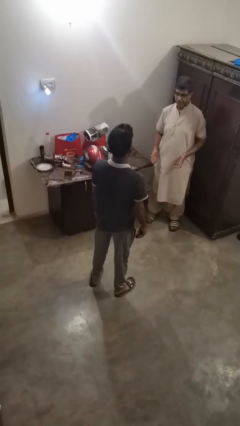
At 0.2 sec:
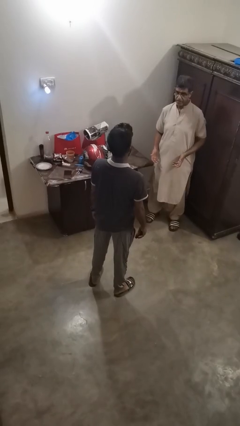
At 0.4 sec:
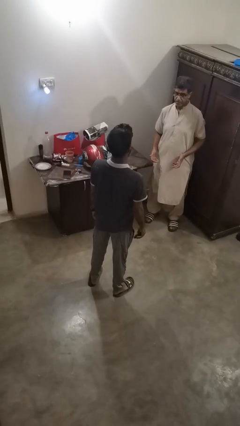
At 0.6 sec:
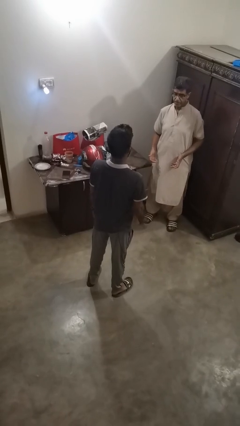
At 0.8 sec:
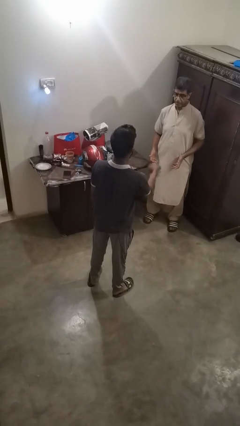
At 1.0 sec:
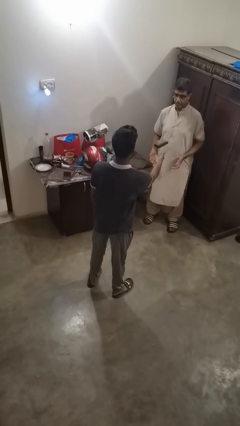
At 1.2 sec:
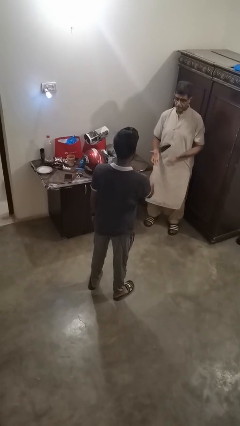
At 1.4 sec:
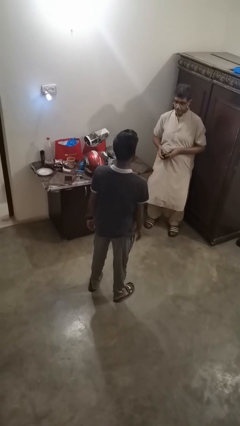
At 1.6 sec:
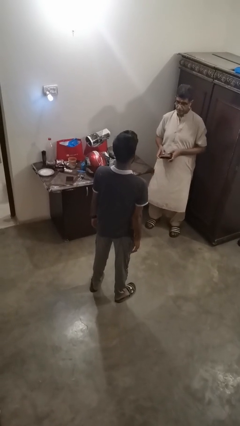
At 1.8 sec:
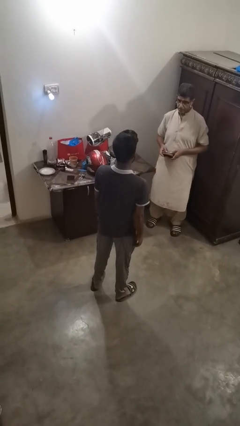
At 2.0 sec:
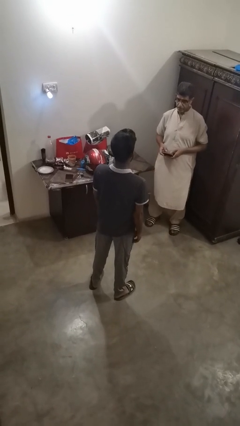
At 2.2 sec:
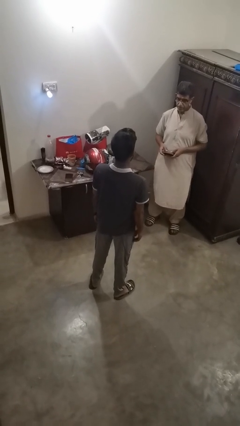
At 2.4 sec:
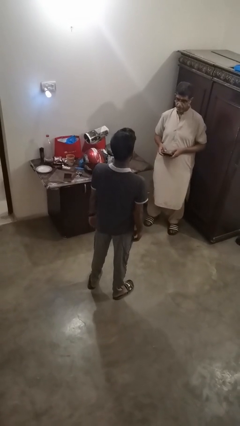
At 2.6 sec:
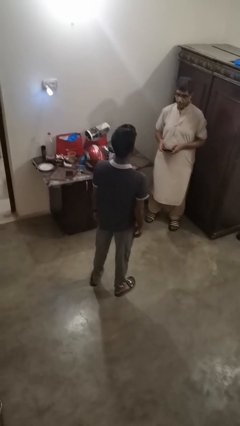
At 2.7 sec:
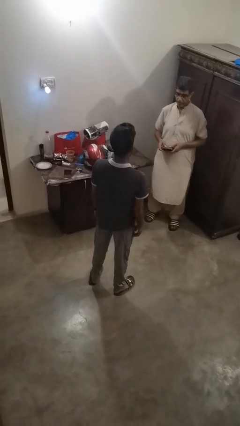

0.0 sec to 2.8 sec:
person throws object to person

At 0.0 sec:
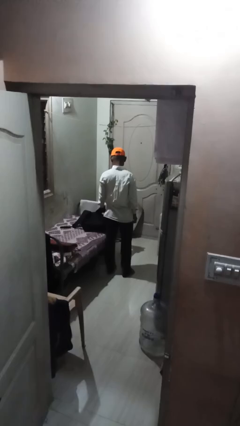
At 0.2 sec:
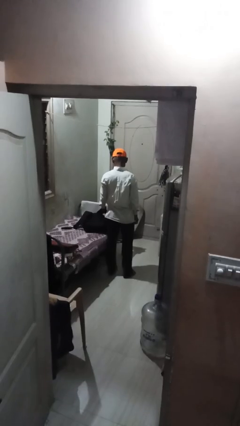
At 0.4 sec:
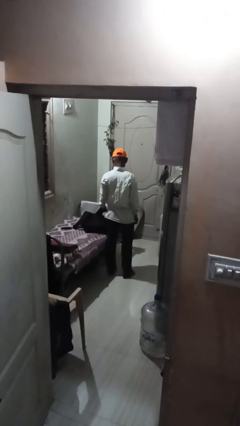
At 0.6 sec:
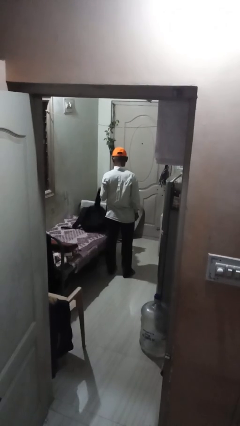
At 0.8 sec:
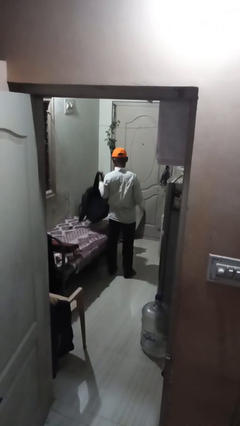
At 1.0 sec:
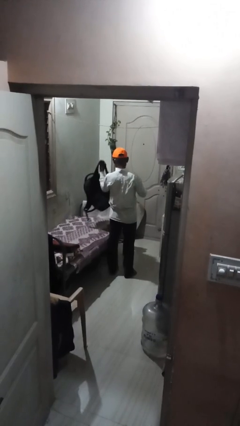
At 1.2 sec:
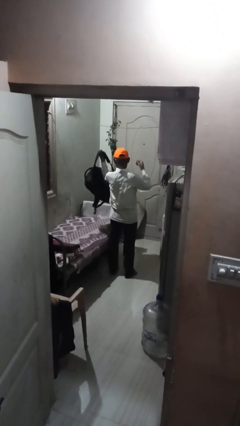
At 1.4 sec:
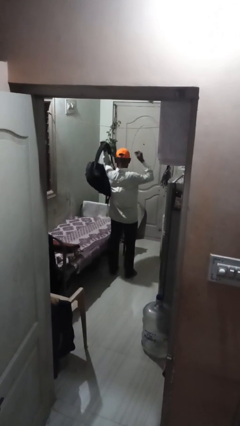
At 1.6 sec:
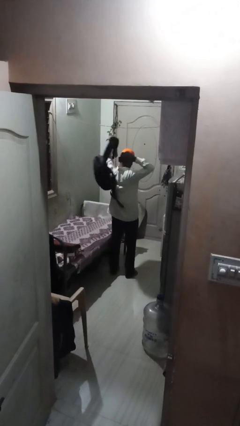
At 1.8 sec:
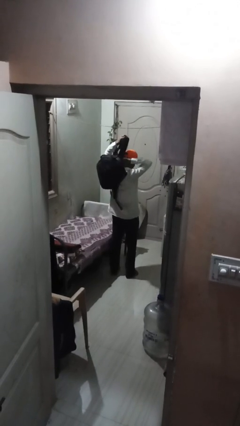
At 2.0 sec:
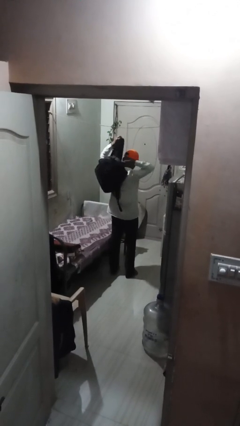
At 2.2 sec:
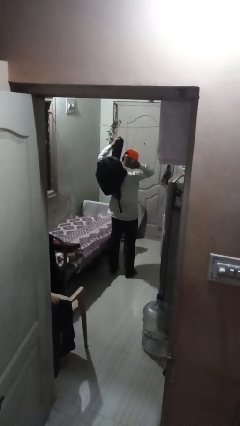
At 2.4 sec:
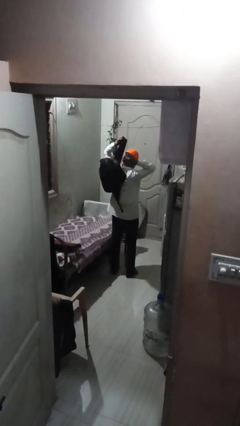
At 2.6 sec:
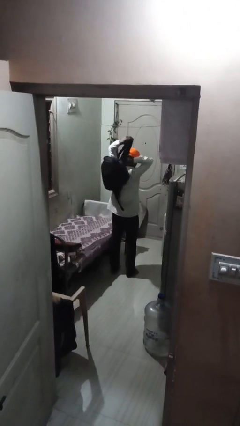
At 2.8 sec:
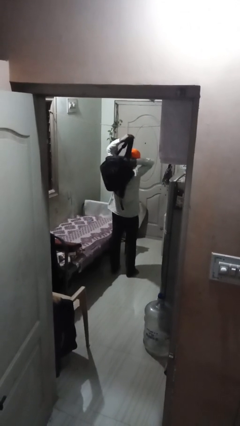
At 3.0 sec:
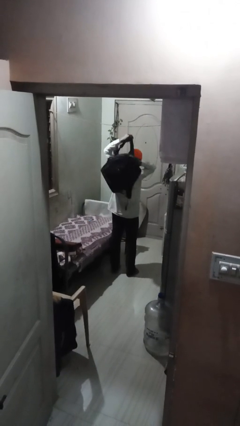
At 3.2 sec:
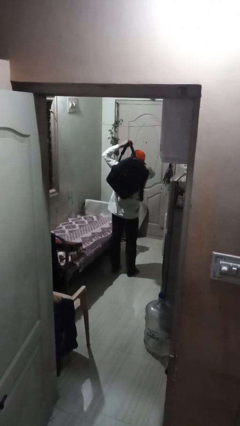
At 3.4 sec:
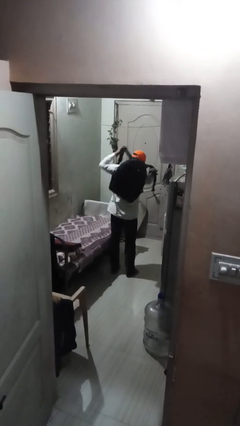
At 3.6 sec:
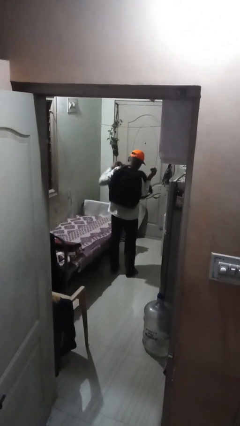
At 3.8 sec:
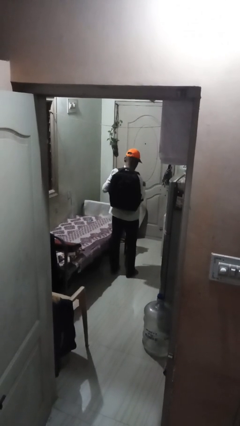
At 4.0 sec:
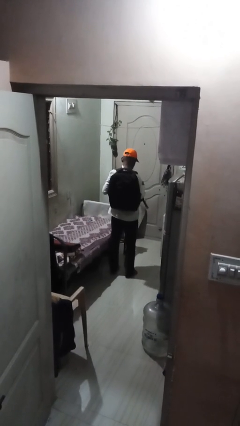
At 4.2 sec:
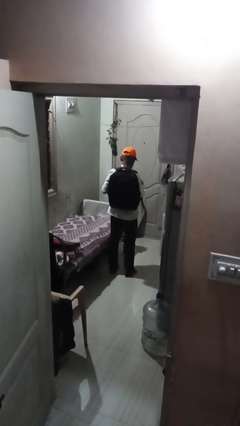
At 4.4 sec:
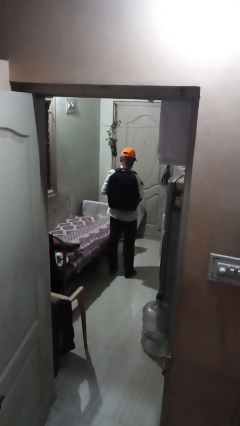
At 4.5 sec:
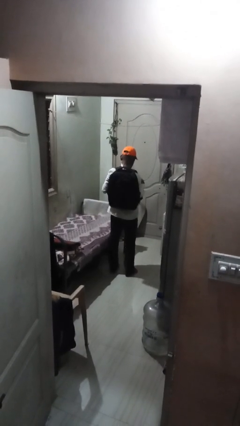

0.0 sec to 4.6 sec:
person puts on backpack

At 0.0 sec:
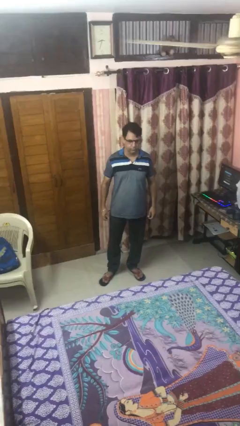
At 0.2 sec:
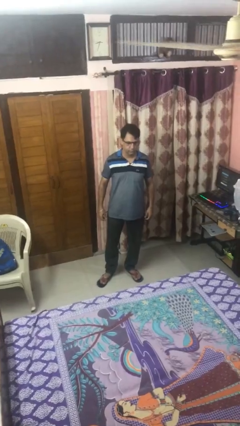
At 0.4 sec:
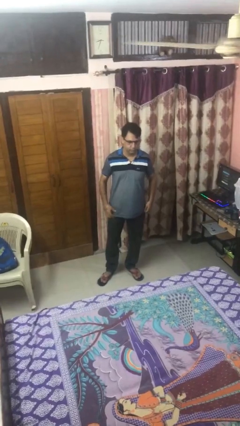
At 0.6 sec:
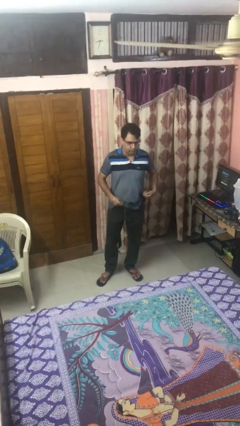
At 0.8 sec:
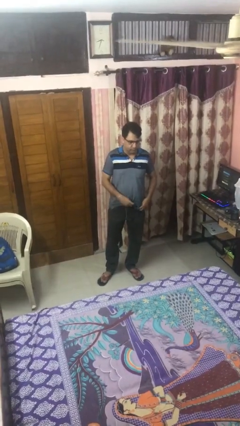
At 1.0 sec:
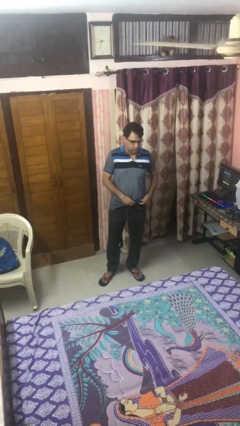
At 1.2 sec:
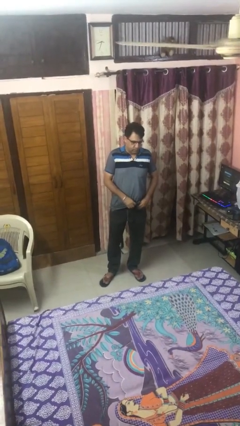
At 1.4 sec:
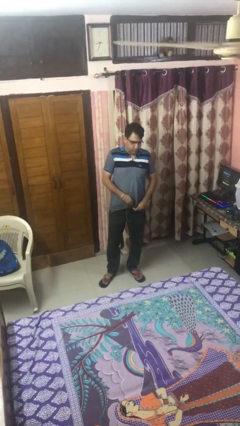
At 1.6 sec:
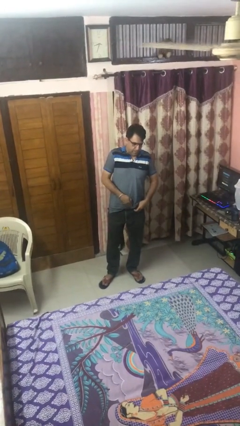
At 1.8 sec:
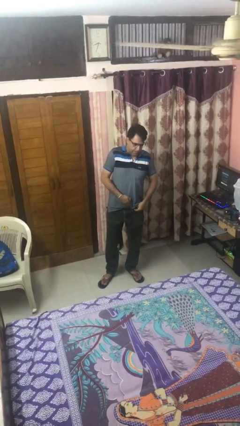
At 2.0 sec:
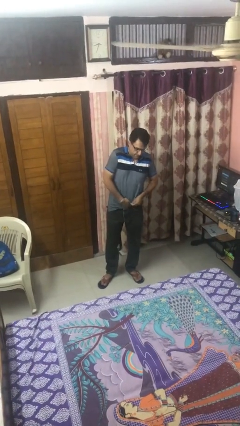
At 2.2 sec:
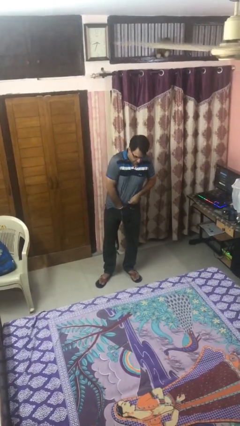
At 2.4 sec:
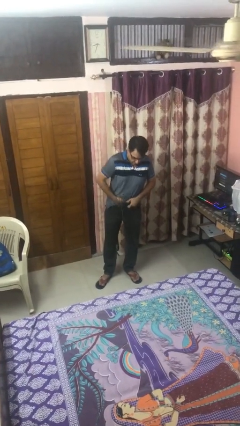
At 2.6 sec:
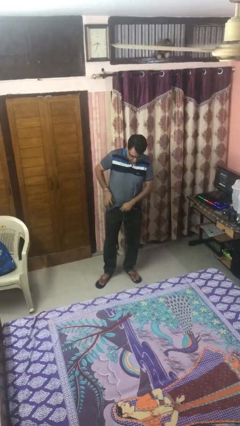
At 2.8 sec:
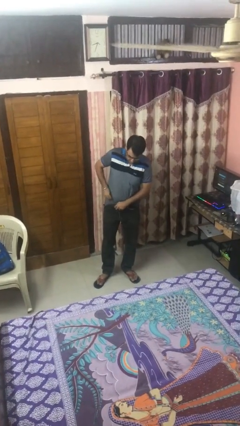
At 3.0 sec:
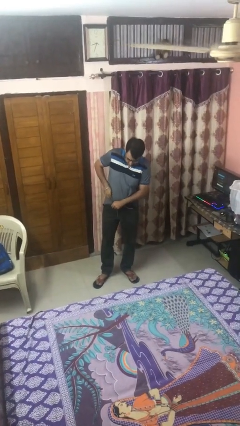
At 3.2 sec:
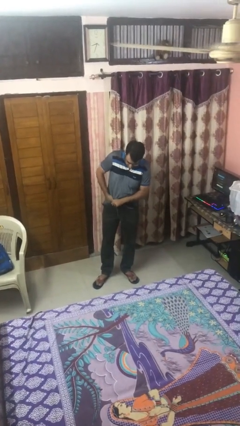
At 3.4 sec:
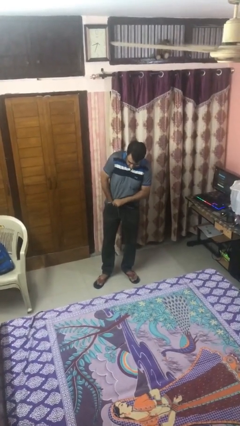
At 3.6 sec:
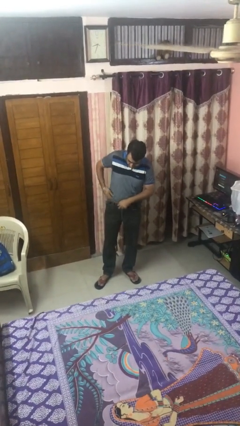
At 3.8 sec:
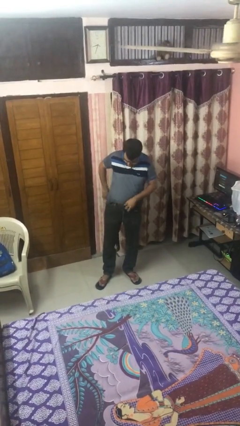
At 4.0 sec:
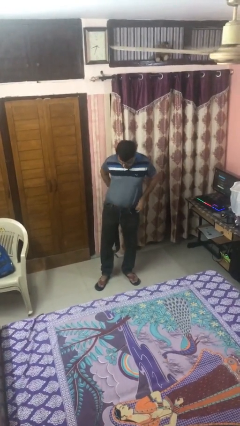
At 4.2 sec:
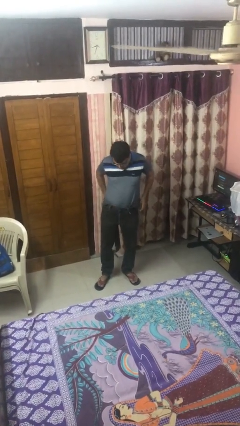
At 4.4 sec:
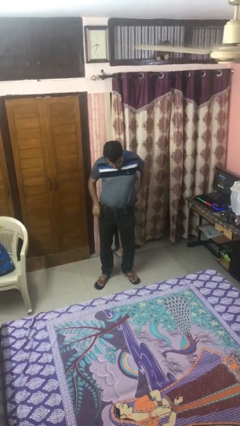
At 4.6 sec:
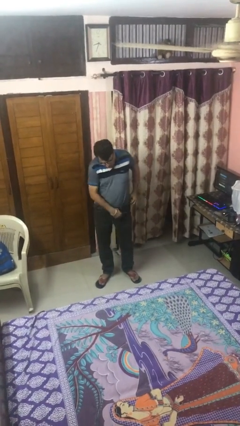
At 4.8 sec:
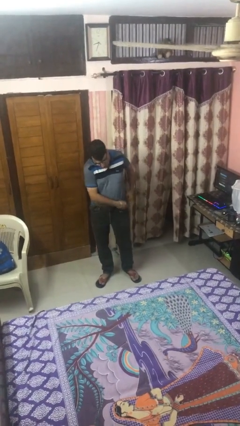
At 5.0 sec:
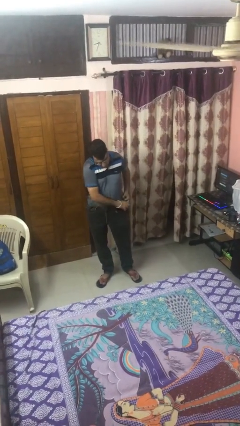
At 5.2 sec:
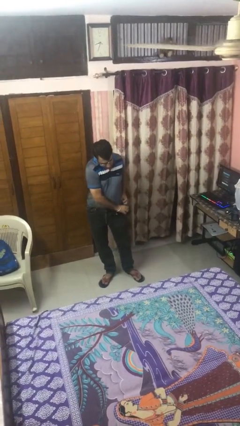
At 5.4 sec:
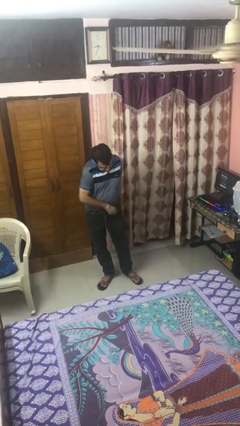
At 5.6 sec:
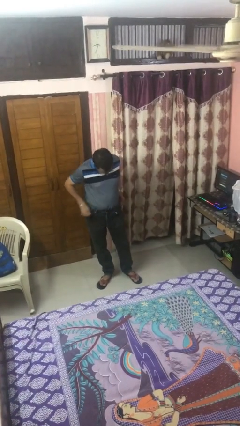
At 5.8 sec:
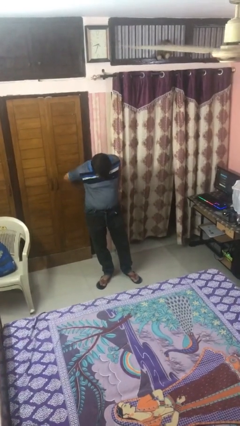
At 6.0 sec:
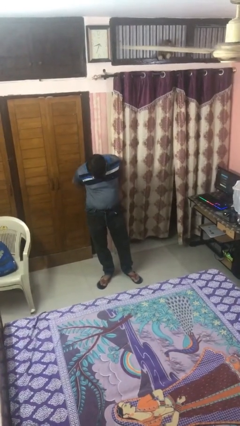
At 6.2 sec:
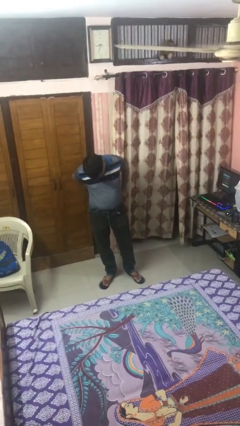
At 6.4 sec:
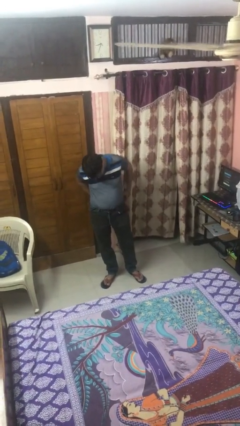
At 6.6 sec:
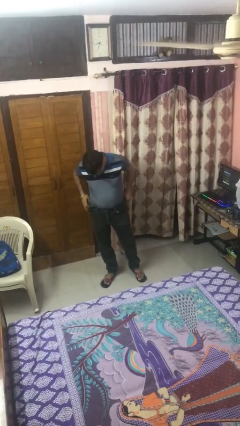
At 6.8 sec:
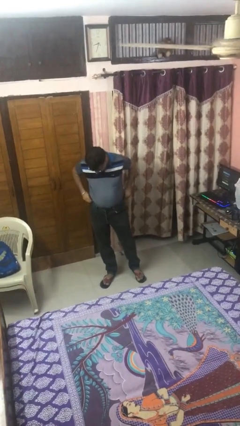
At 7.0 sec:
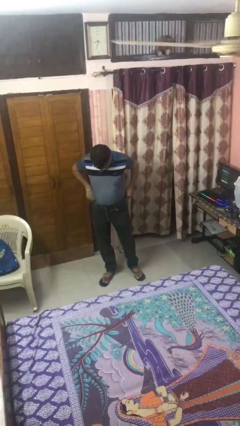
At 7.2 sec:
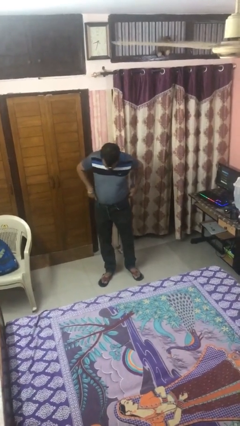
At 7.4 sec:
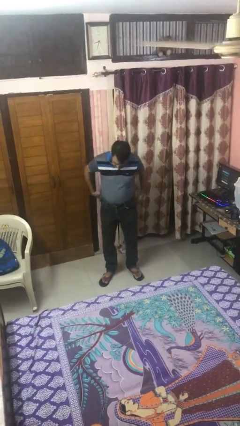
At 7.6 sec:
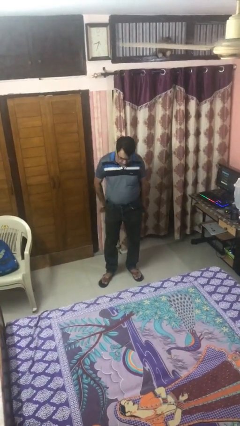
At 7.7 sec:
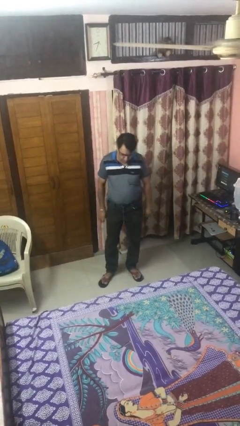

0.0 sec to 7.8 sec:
person tucks in shirt

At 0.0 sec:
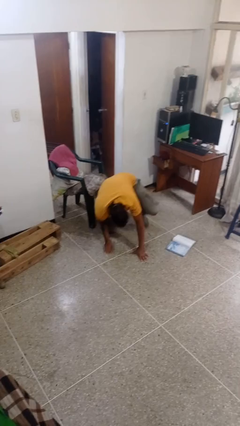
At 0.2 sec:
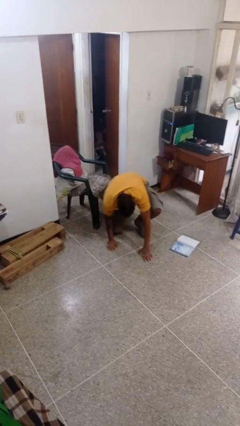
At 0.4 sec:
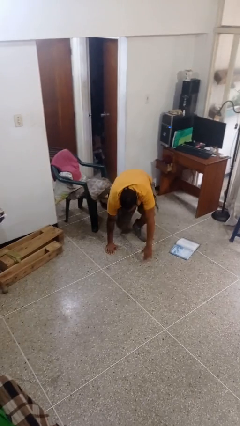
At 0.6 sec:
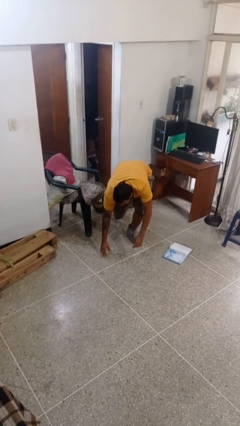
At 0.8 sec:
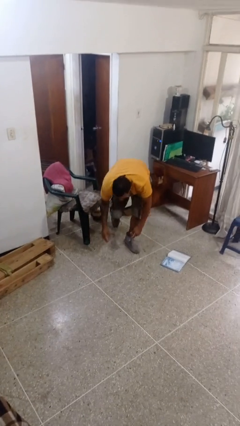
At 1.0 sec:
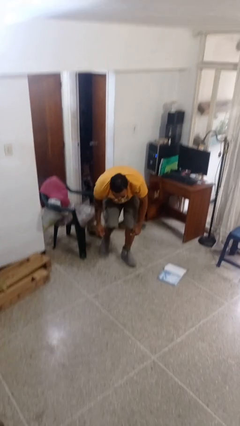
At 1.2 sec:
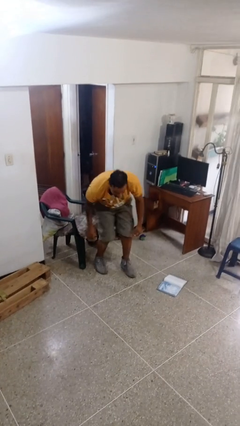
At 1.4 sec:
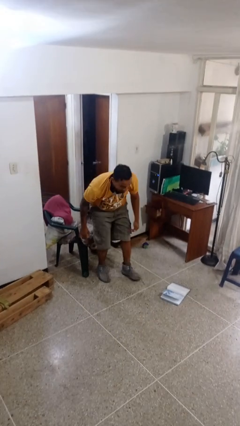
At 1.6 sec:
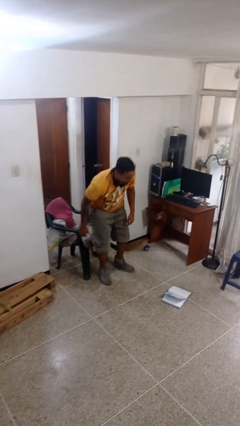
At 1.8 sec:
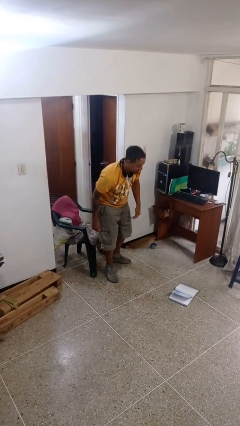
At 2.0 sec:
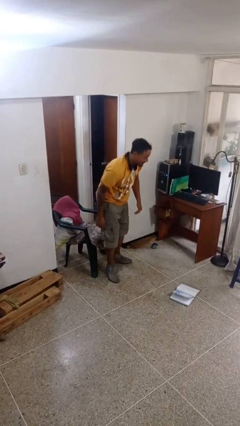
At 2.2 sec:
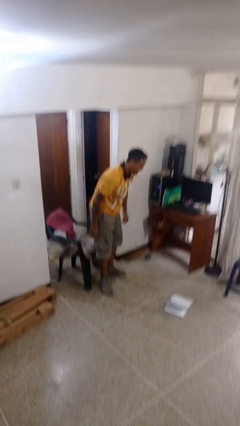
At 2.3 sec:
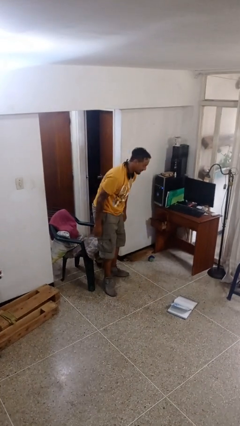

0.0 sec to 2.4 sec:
person stands up from floor
